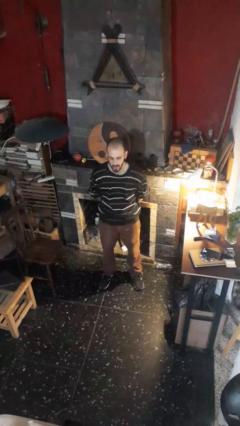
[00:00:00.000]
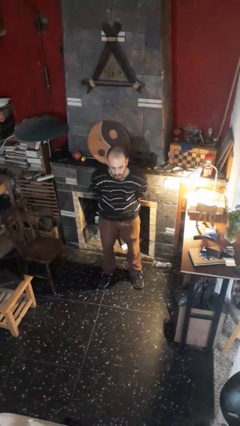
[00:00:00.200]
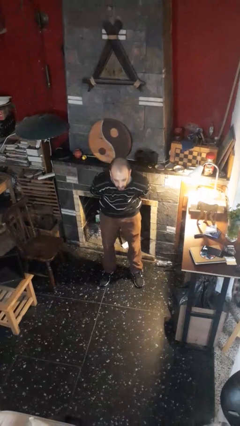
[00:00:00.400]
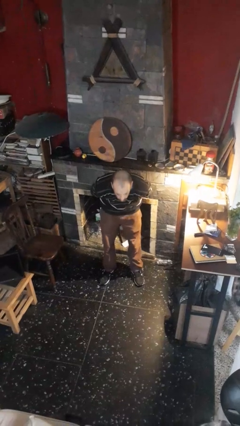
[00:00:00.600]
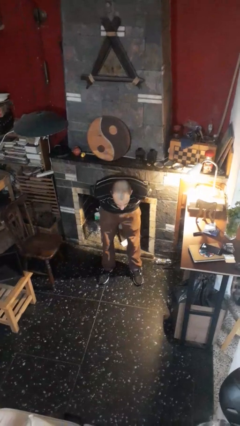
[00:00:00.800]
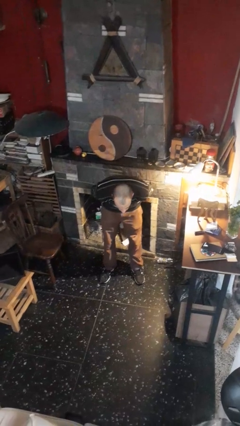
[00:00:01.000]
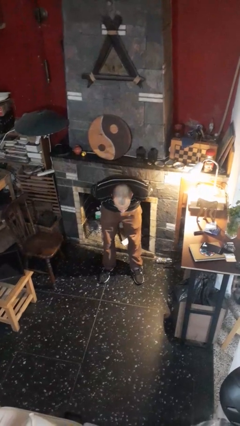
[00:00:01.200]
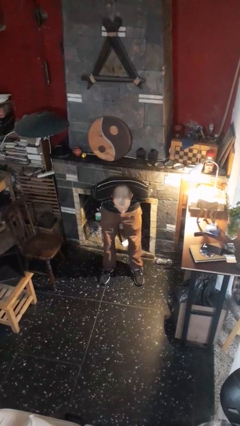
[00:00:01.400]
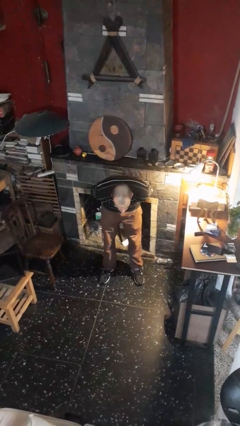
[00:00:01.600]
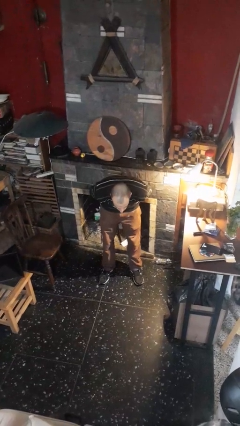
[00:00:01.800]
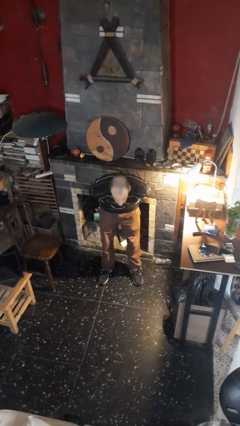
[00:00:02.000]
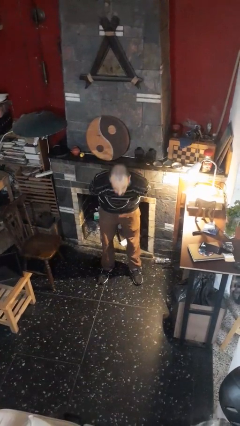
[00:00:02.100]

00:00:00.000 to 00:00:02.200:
person bows

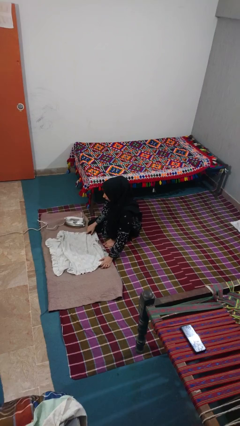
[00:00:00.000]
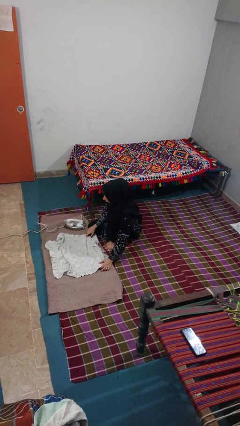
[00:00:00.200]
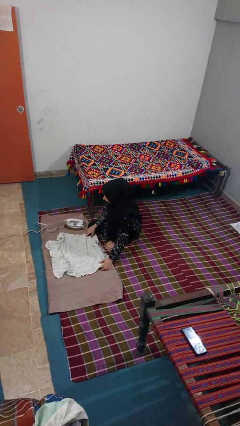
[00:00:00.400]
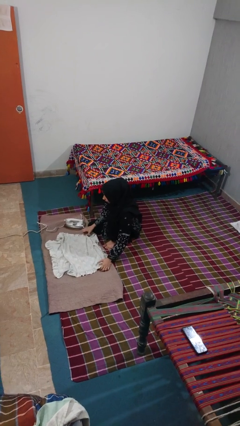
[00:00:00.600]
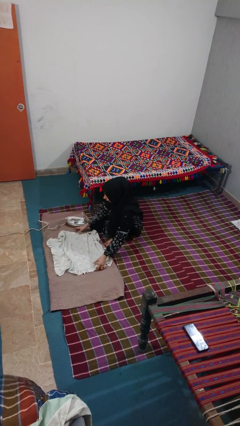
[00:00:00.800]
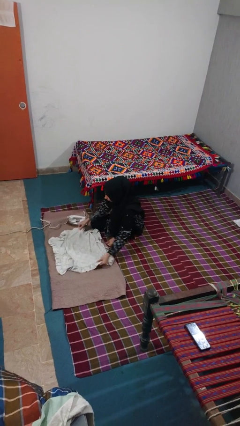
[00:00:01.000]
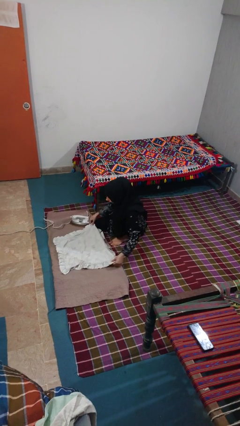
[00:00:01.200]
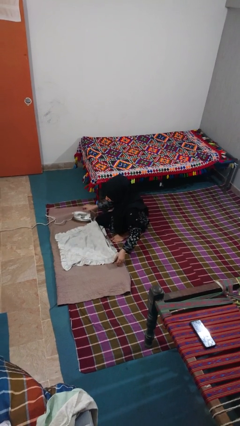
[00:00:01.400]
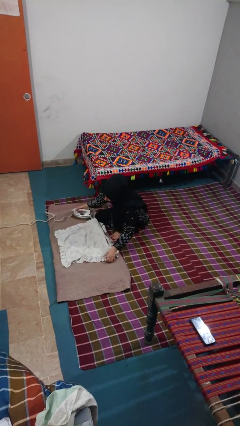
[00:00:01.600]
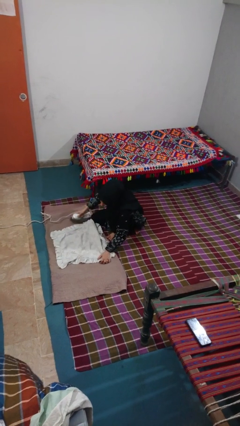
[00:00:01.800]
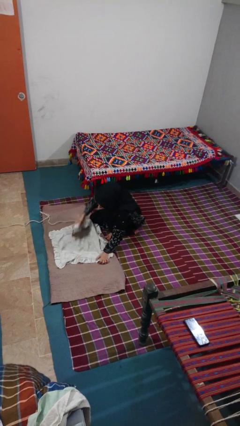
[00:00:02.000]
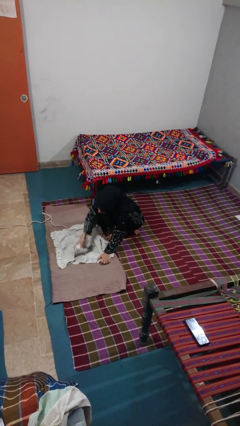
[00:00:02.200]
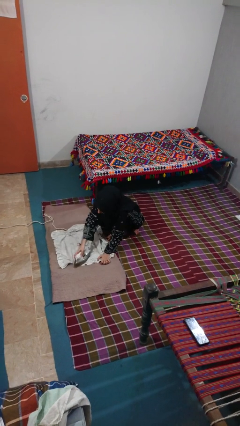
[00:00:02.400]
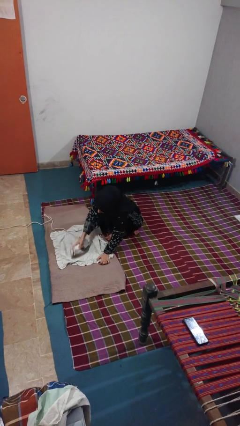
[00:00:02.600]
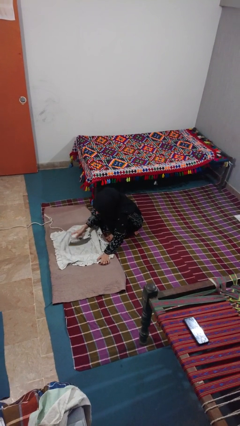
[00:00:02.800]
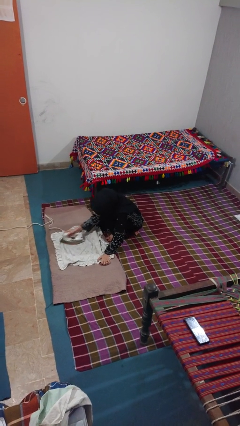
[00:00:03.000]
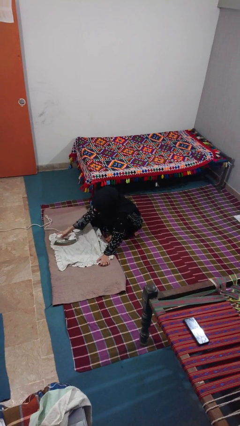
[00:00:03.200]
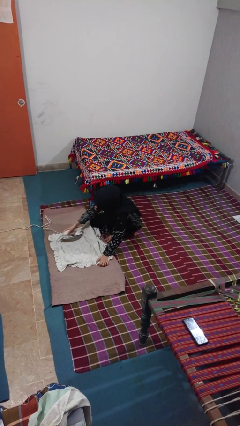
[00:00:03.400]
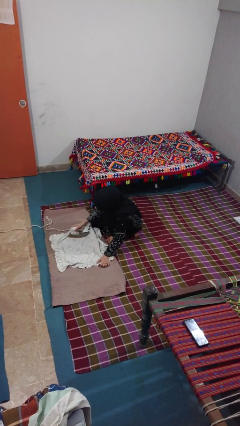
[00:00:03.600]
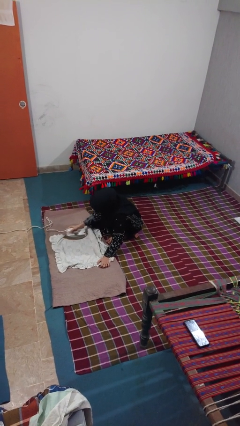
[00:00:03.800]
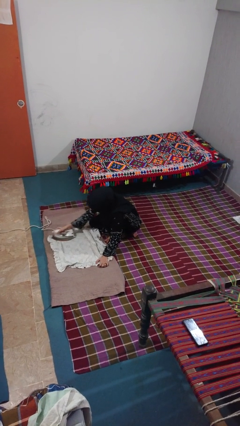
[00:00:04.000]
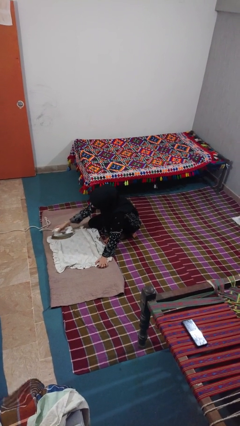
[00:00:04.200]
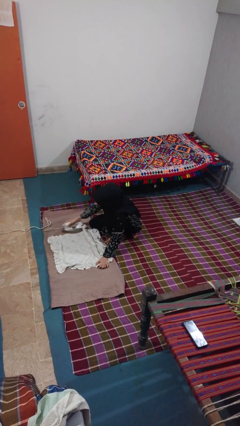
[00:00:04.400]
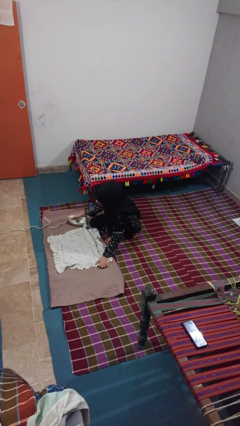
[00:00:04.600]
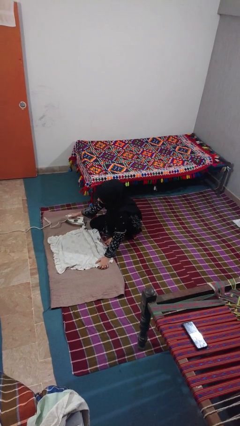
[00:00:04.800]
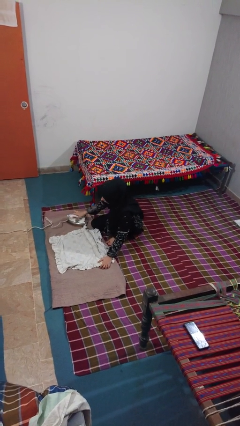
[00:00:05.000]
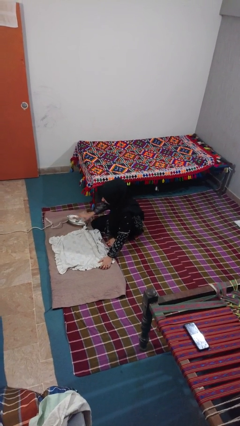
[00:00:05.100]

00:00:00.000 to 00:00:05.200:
person irons clothes

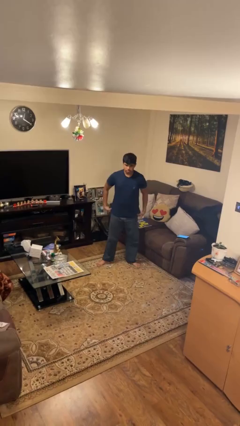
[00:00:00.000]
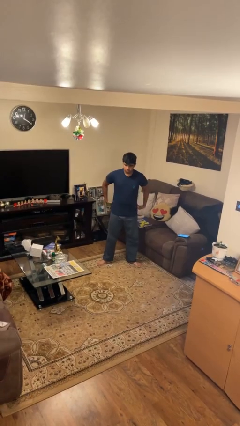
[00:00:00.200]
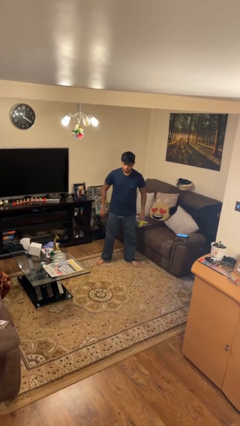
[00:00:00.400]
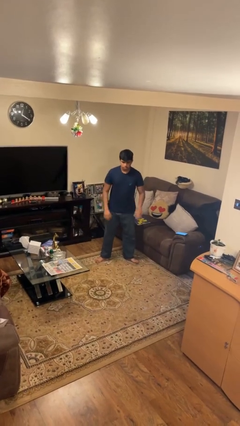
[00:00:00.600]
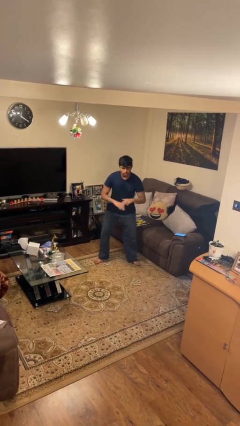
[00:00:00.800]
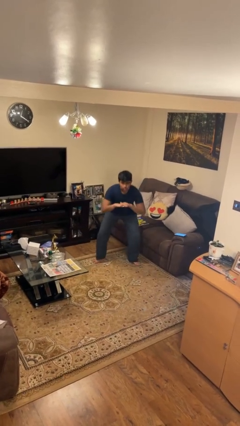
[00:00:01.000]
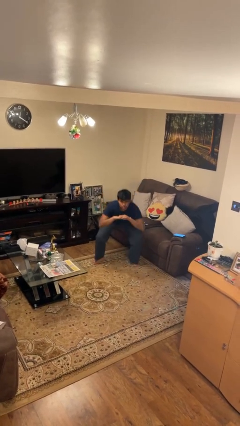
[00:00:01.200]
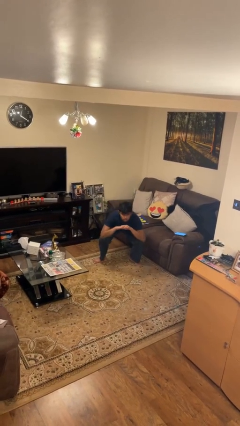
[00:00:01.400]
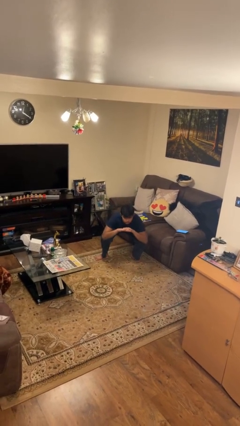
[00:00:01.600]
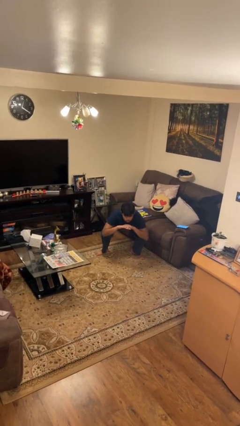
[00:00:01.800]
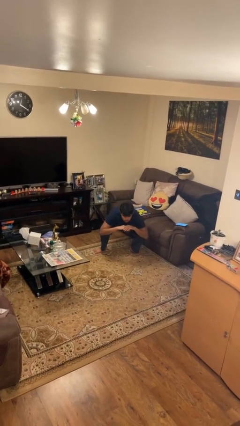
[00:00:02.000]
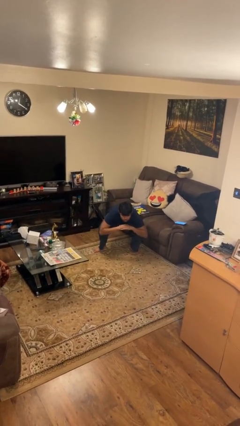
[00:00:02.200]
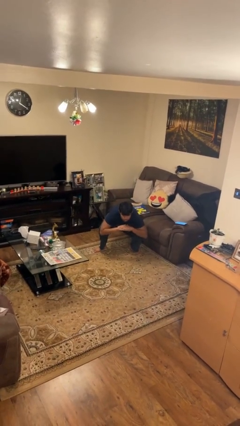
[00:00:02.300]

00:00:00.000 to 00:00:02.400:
person squats

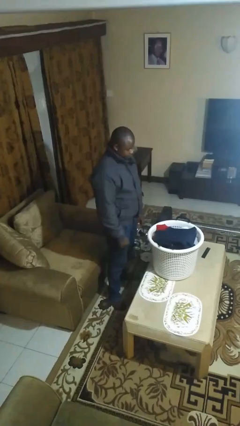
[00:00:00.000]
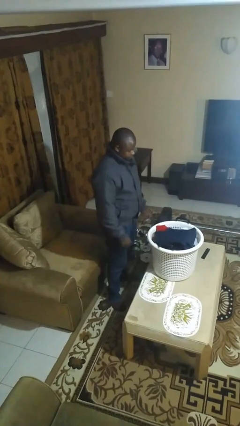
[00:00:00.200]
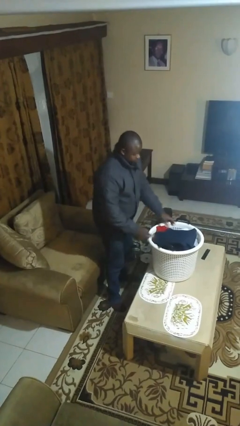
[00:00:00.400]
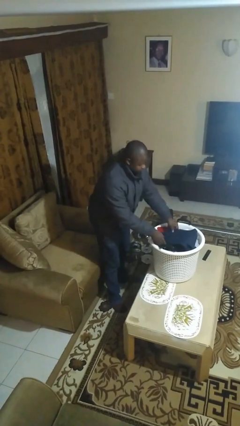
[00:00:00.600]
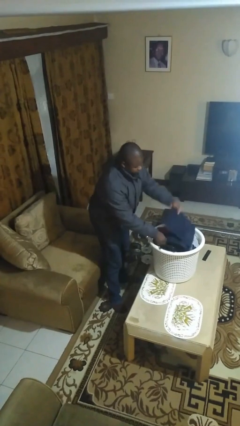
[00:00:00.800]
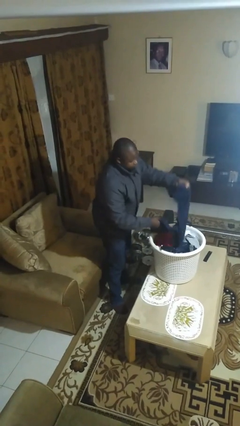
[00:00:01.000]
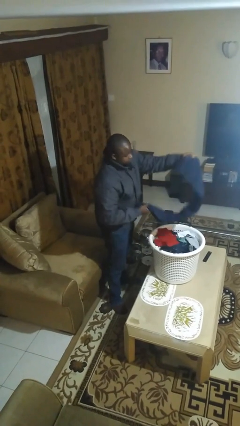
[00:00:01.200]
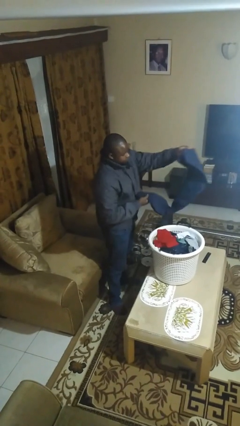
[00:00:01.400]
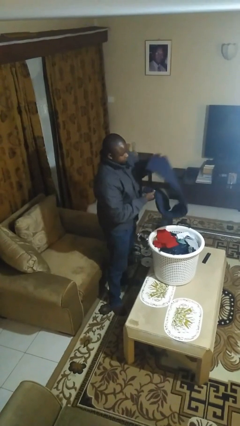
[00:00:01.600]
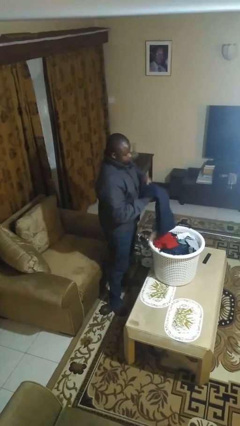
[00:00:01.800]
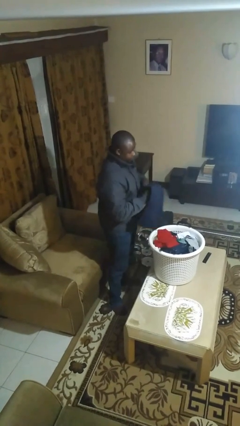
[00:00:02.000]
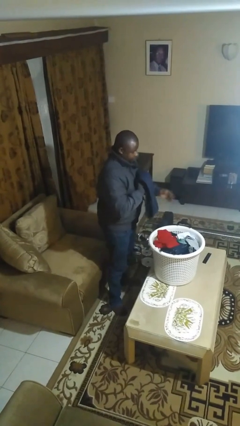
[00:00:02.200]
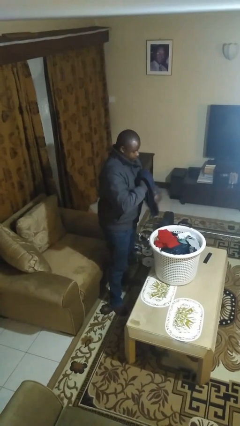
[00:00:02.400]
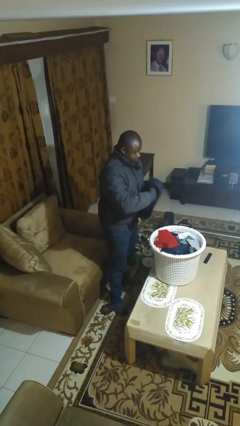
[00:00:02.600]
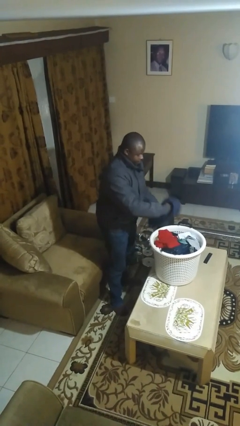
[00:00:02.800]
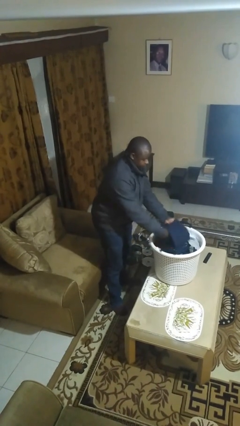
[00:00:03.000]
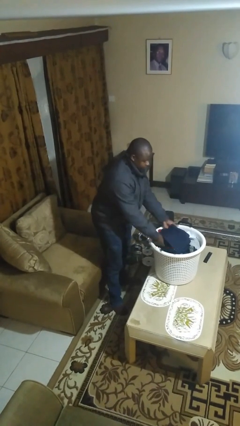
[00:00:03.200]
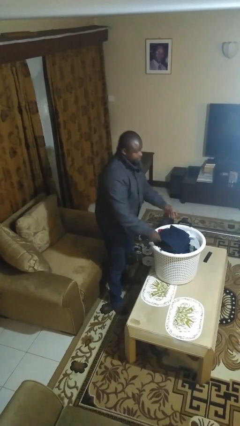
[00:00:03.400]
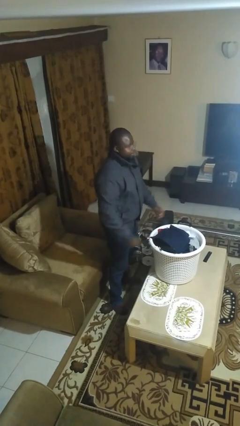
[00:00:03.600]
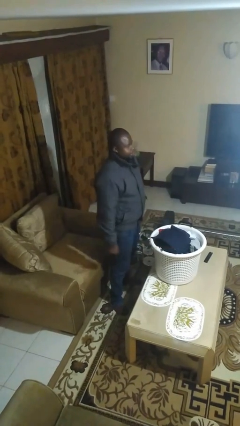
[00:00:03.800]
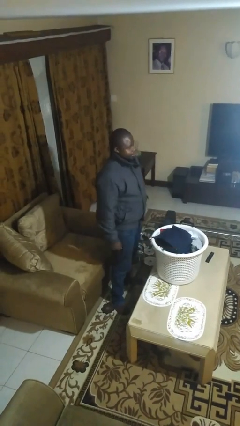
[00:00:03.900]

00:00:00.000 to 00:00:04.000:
person folds pants

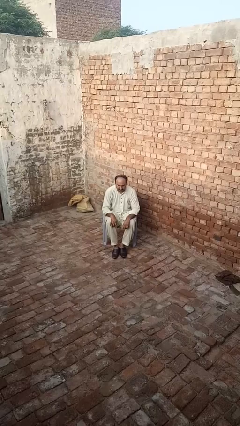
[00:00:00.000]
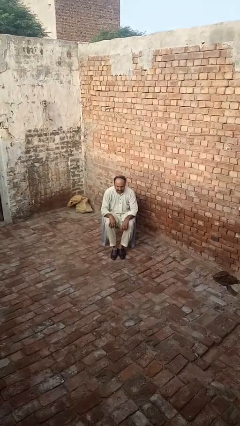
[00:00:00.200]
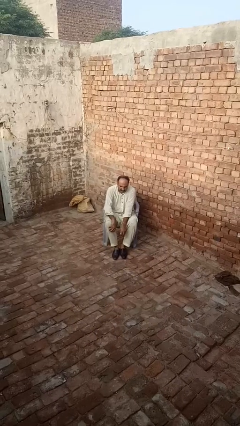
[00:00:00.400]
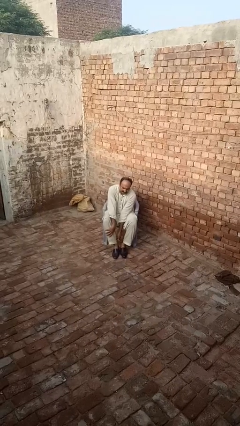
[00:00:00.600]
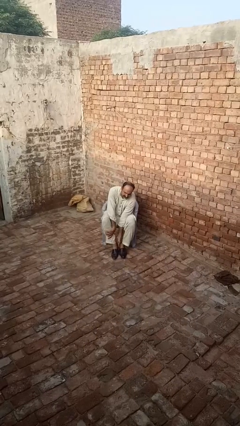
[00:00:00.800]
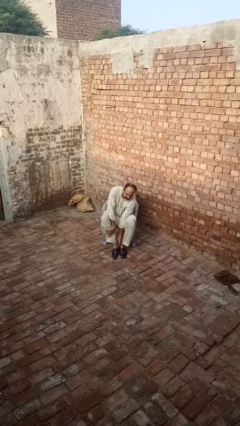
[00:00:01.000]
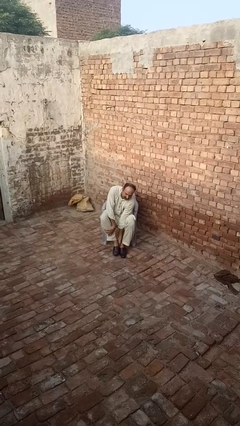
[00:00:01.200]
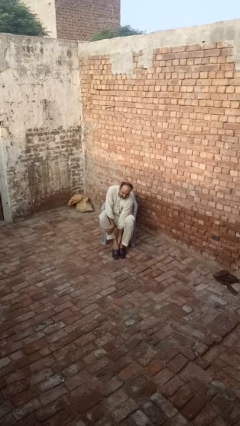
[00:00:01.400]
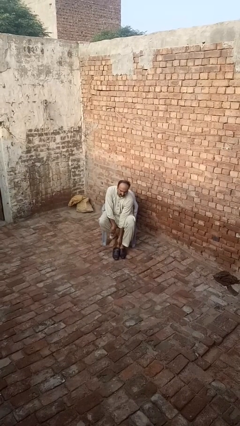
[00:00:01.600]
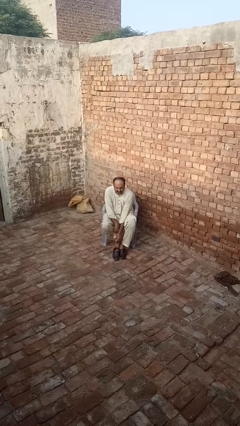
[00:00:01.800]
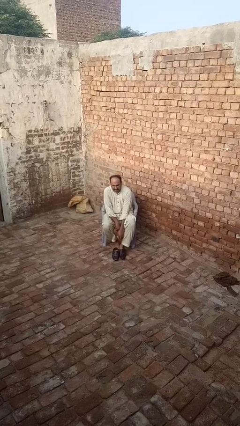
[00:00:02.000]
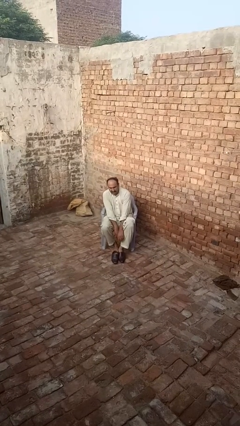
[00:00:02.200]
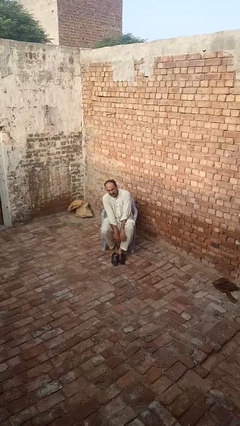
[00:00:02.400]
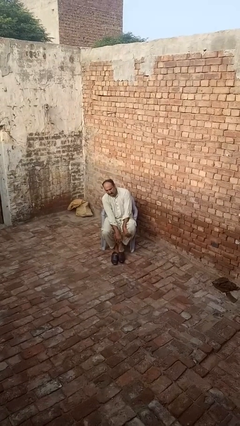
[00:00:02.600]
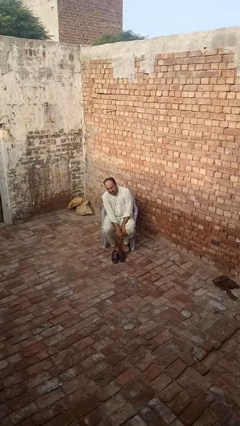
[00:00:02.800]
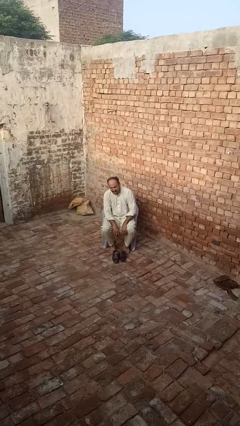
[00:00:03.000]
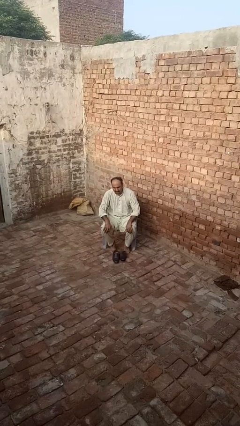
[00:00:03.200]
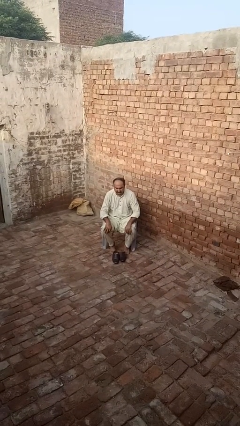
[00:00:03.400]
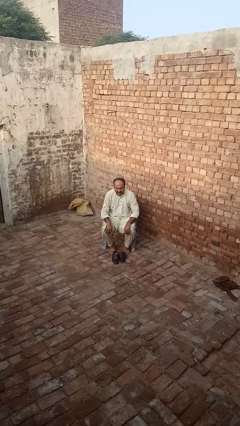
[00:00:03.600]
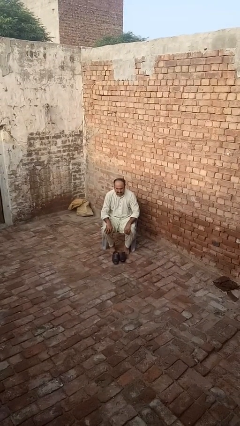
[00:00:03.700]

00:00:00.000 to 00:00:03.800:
person takes off shoes
